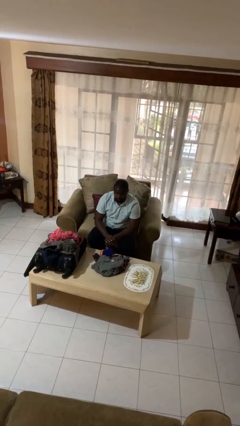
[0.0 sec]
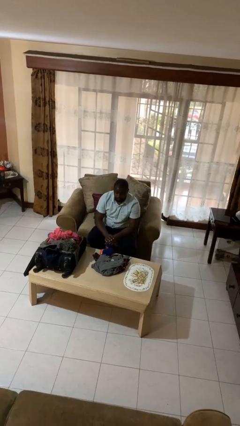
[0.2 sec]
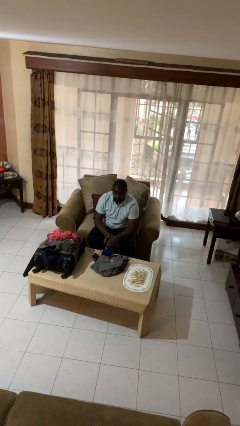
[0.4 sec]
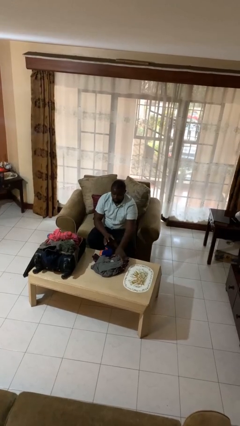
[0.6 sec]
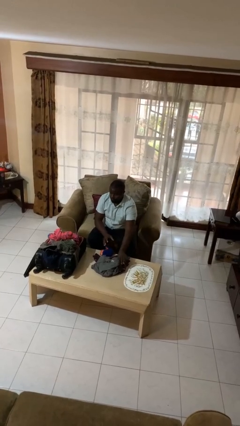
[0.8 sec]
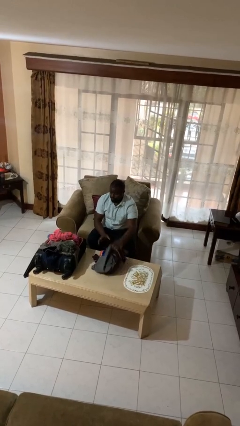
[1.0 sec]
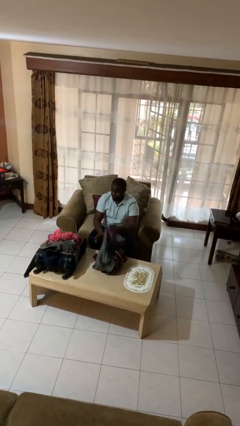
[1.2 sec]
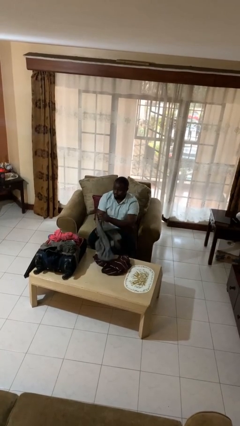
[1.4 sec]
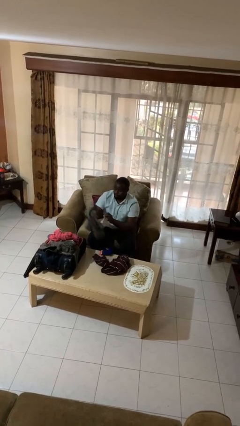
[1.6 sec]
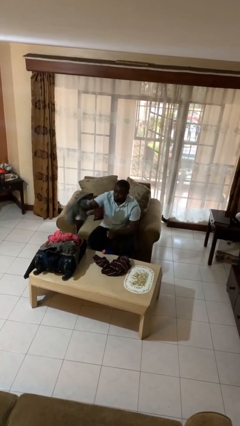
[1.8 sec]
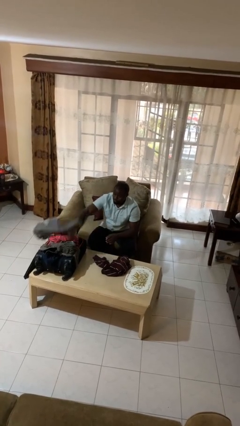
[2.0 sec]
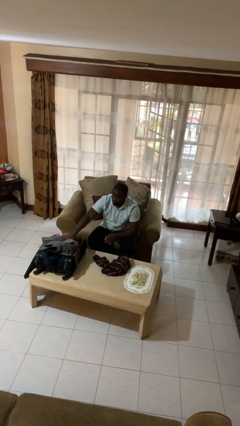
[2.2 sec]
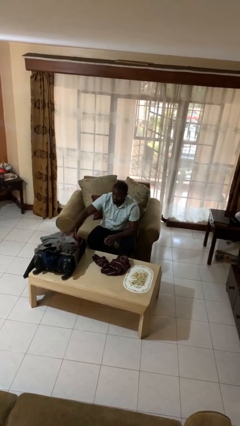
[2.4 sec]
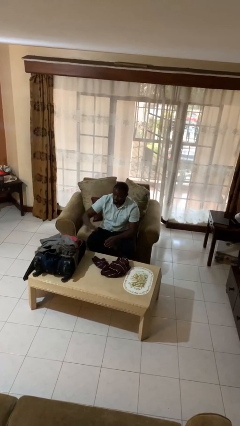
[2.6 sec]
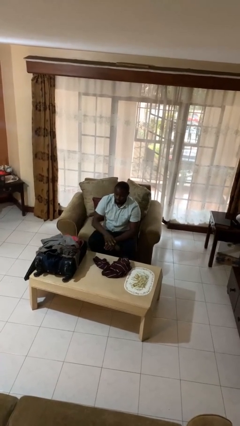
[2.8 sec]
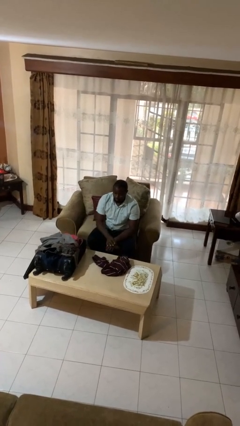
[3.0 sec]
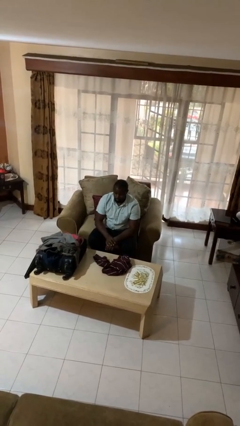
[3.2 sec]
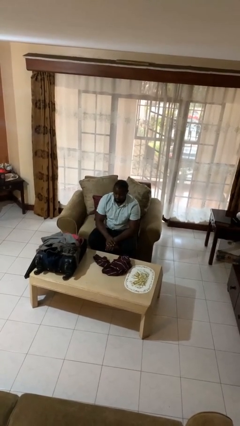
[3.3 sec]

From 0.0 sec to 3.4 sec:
person loads clothes into suitcase

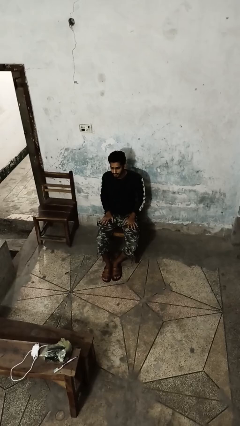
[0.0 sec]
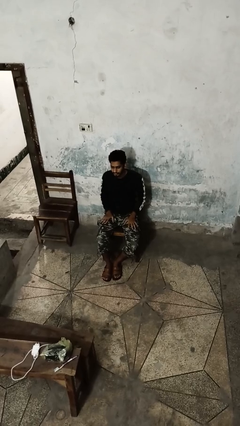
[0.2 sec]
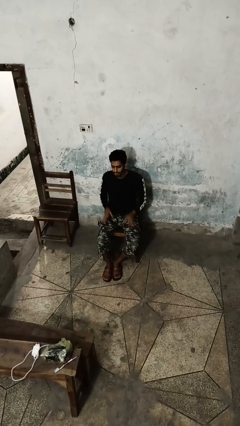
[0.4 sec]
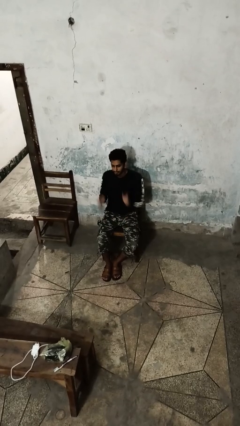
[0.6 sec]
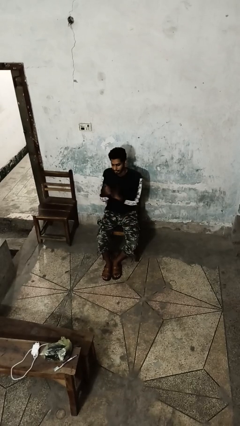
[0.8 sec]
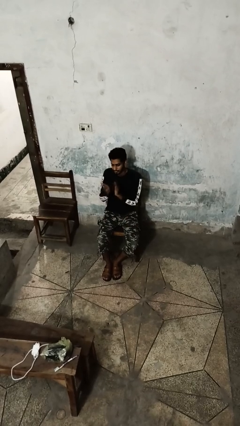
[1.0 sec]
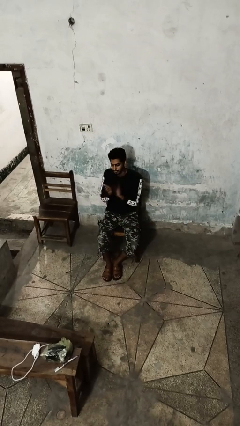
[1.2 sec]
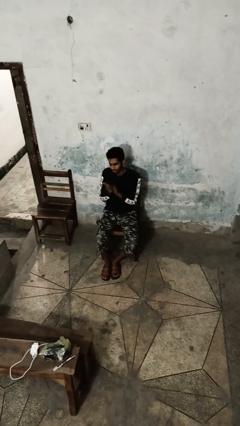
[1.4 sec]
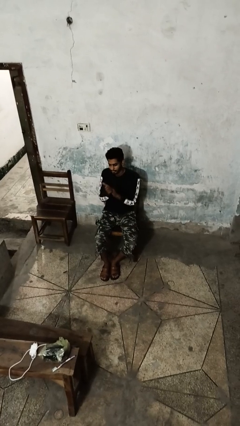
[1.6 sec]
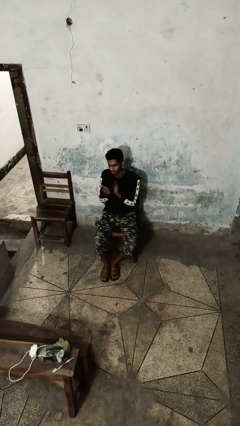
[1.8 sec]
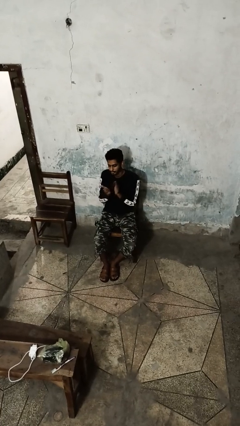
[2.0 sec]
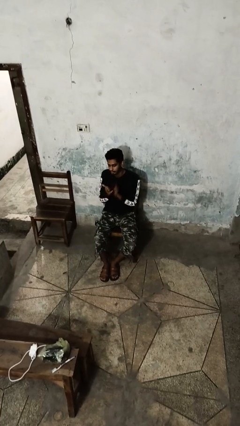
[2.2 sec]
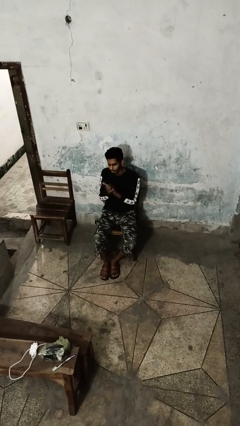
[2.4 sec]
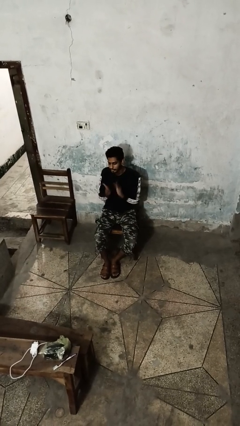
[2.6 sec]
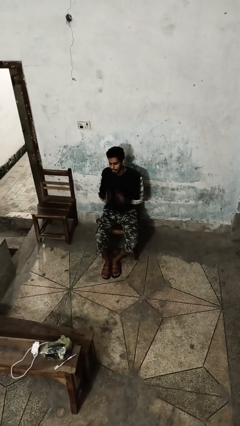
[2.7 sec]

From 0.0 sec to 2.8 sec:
person claps hands

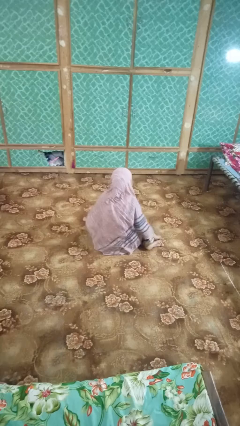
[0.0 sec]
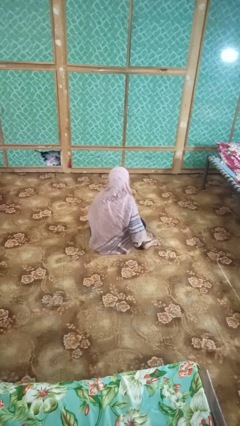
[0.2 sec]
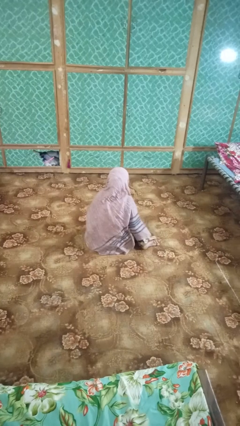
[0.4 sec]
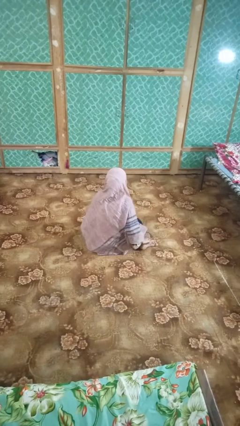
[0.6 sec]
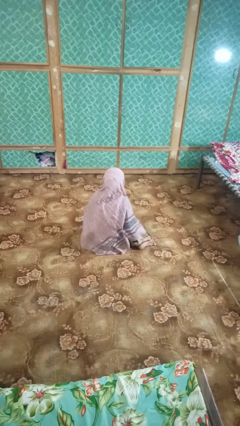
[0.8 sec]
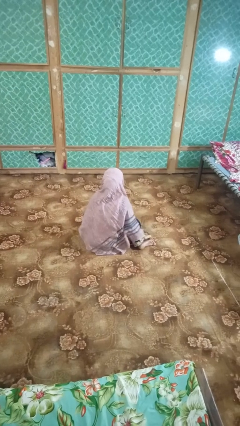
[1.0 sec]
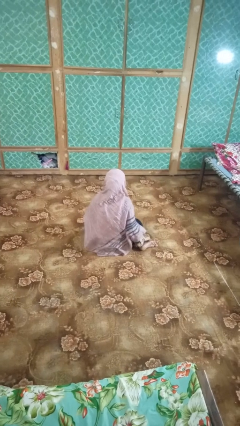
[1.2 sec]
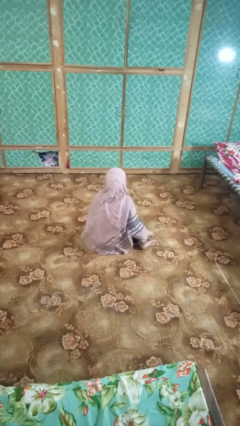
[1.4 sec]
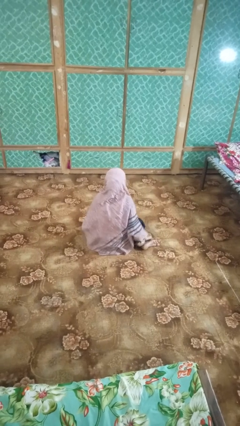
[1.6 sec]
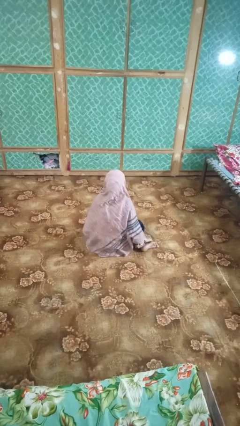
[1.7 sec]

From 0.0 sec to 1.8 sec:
person rubs foot

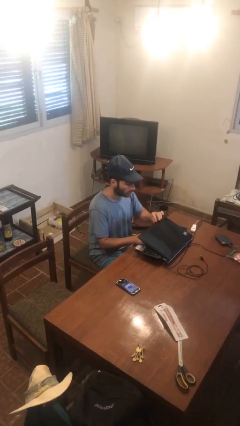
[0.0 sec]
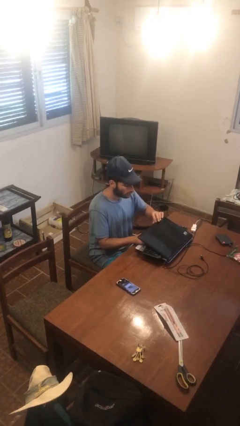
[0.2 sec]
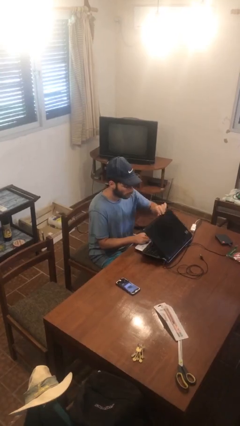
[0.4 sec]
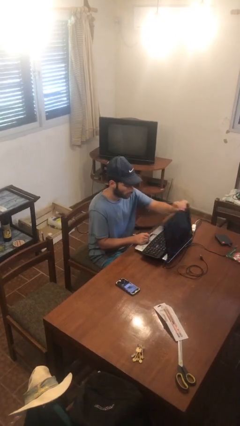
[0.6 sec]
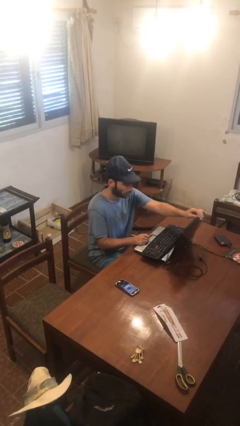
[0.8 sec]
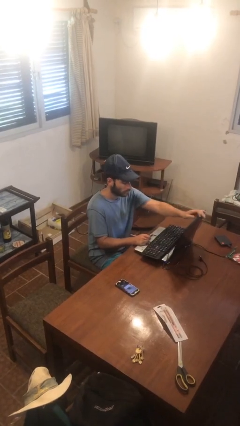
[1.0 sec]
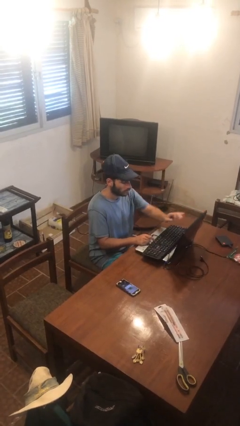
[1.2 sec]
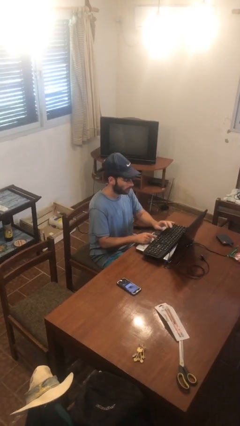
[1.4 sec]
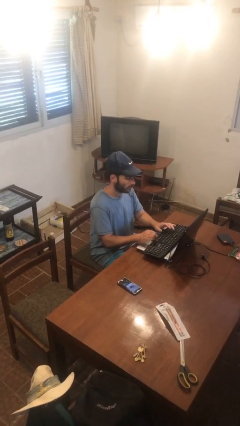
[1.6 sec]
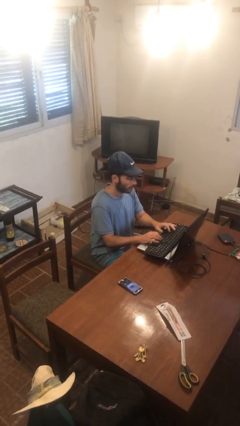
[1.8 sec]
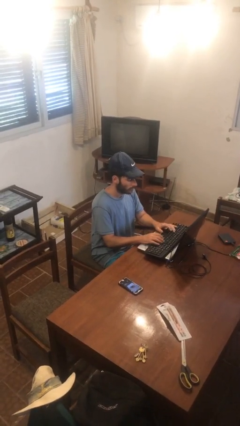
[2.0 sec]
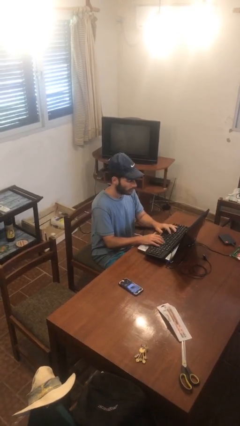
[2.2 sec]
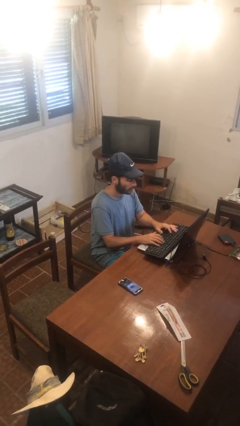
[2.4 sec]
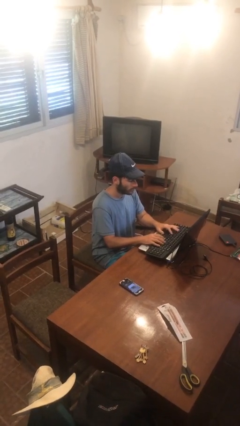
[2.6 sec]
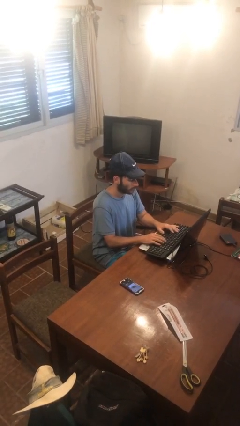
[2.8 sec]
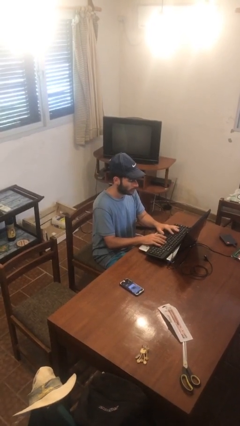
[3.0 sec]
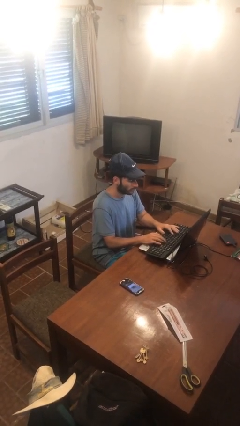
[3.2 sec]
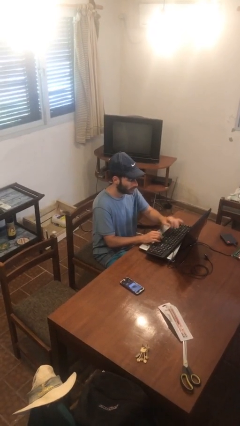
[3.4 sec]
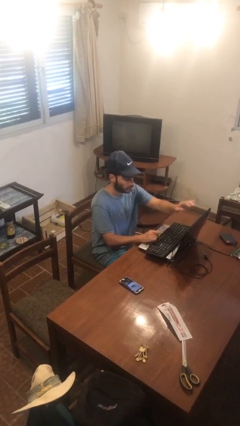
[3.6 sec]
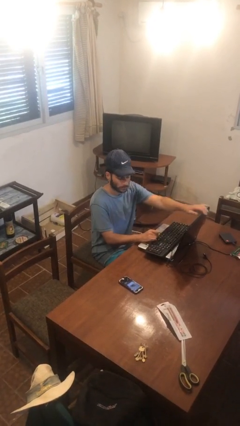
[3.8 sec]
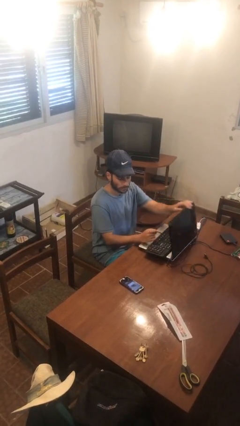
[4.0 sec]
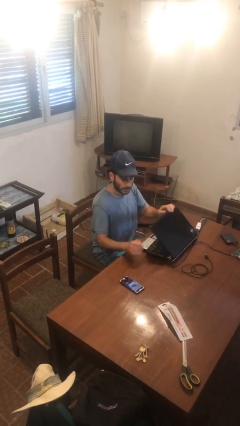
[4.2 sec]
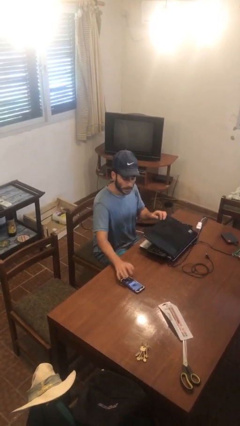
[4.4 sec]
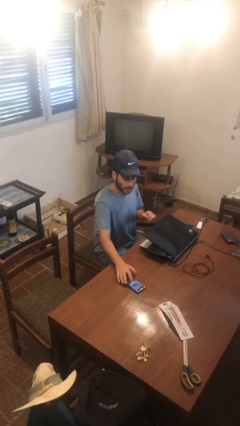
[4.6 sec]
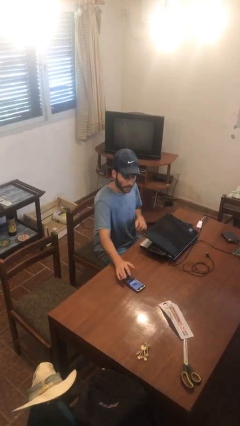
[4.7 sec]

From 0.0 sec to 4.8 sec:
person interacts with laptop

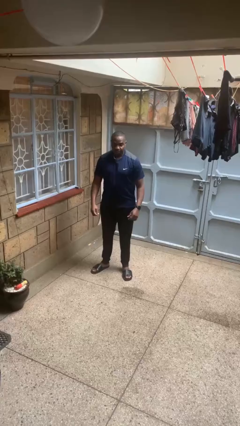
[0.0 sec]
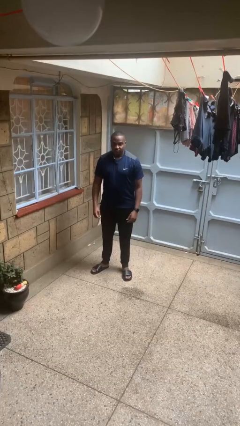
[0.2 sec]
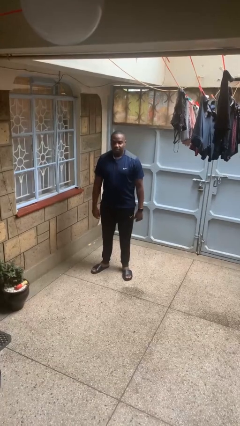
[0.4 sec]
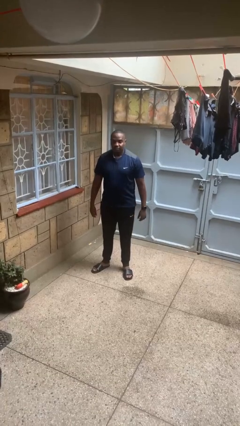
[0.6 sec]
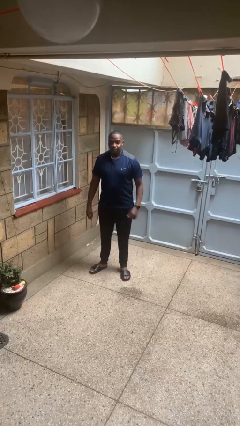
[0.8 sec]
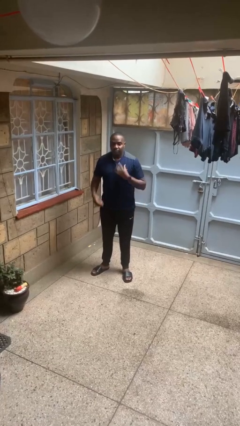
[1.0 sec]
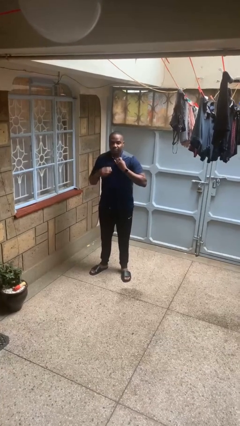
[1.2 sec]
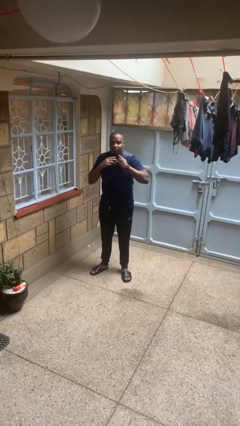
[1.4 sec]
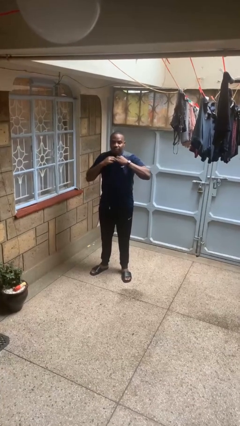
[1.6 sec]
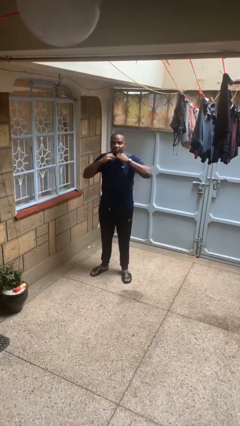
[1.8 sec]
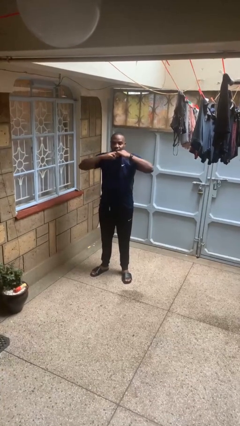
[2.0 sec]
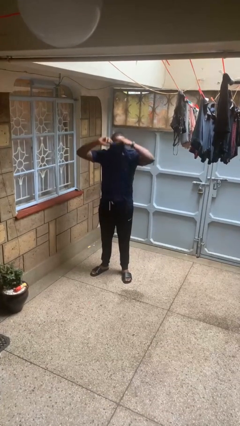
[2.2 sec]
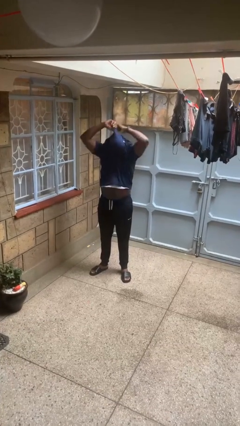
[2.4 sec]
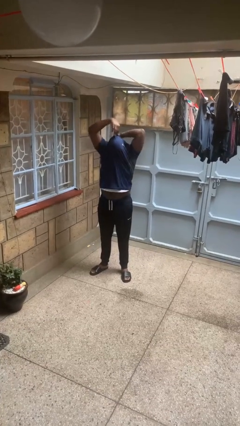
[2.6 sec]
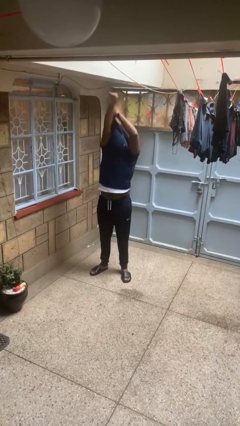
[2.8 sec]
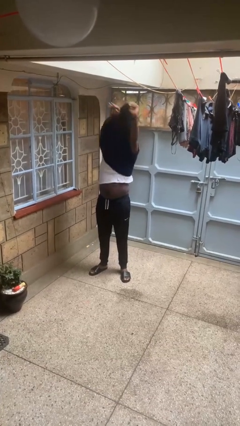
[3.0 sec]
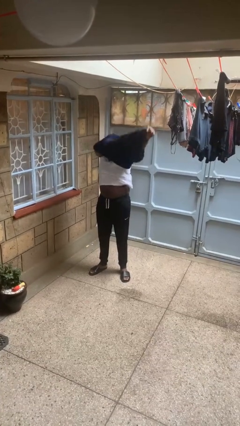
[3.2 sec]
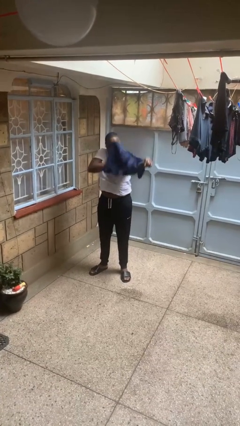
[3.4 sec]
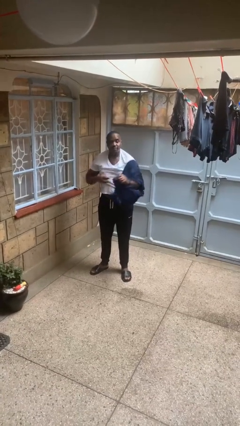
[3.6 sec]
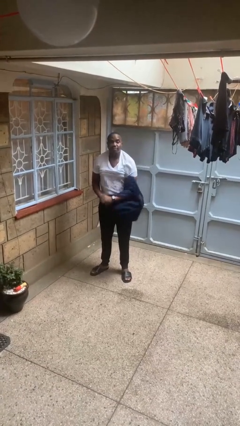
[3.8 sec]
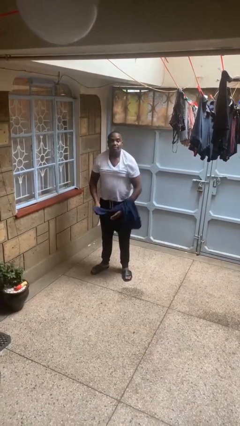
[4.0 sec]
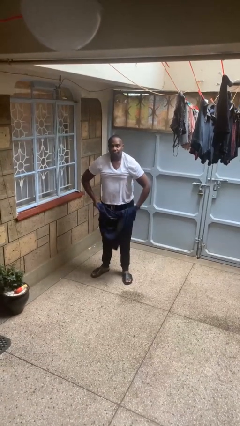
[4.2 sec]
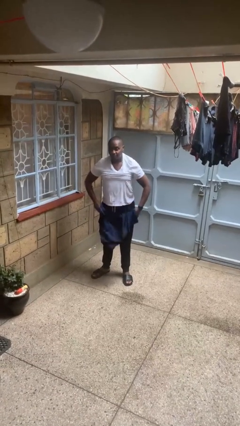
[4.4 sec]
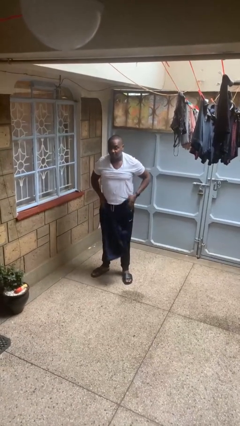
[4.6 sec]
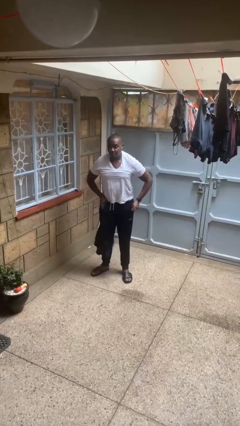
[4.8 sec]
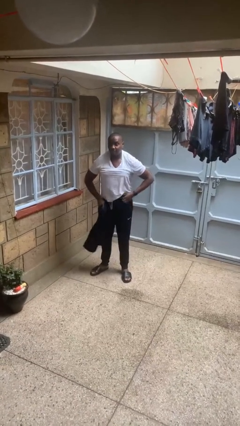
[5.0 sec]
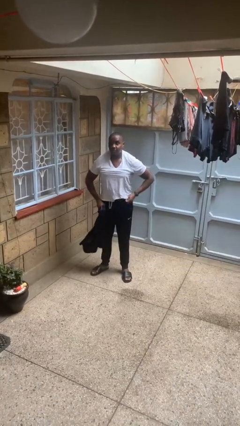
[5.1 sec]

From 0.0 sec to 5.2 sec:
person takes off shirt
